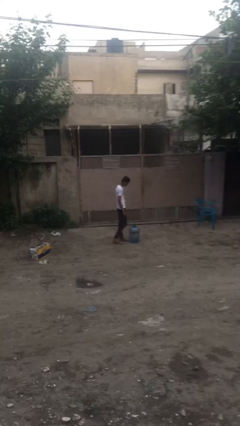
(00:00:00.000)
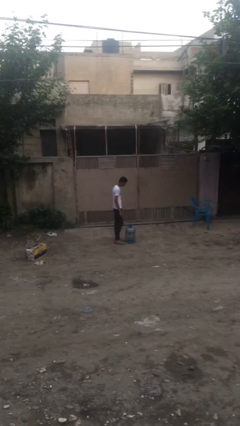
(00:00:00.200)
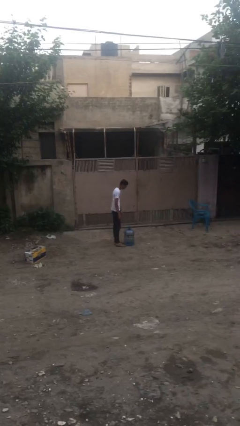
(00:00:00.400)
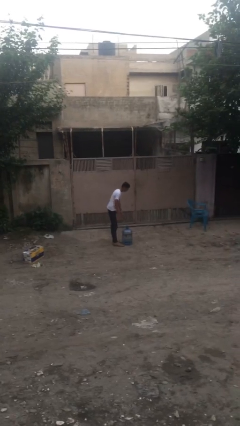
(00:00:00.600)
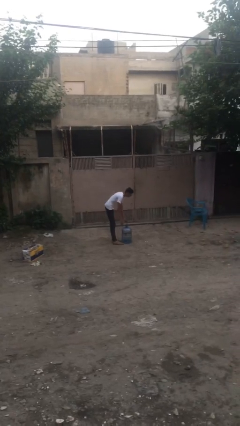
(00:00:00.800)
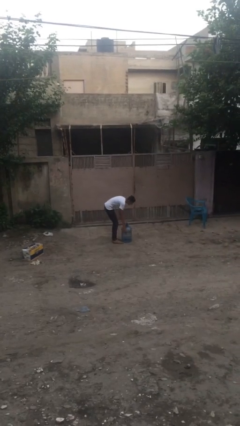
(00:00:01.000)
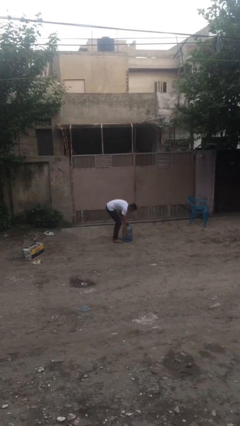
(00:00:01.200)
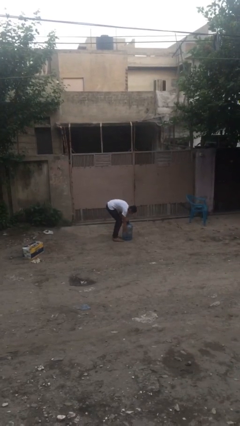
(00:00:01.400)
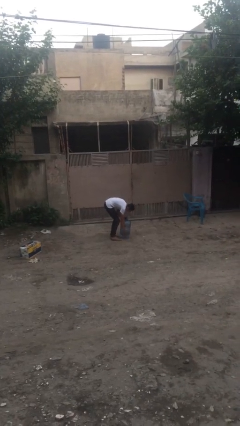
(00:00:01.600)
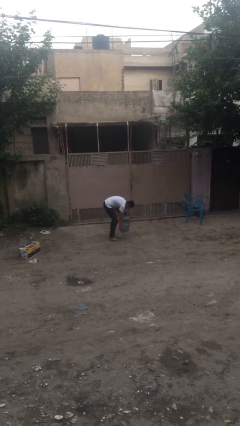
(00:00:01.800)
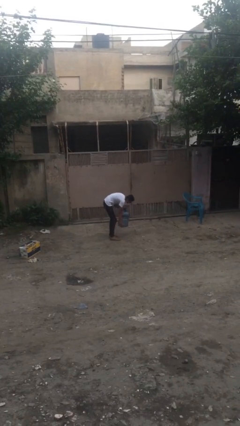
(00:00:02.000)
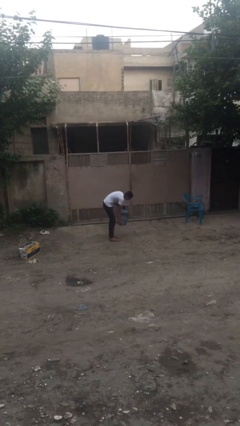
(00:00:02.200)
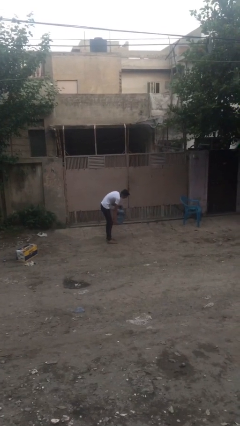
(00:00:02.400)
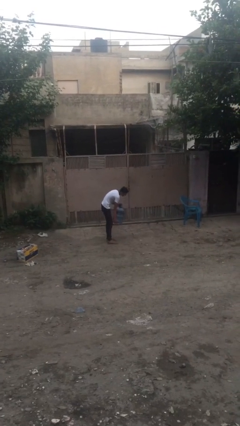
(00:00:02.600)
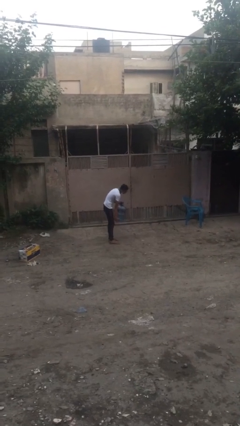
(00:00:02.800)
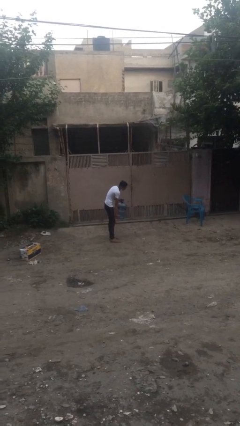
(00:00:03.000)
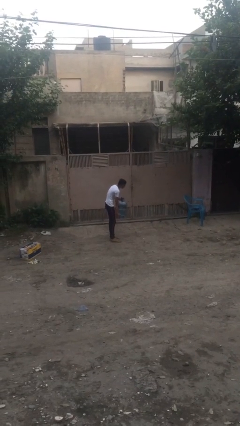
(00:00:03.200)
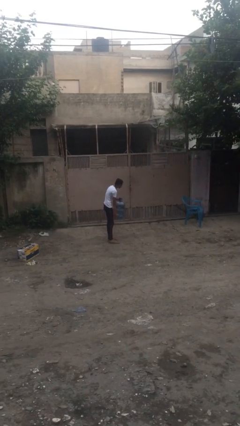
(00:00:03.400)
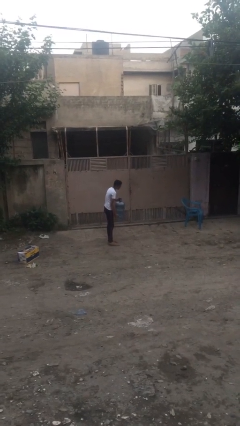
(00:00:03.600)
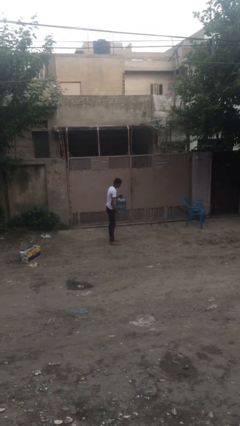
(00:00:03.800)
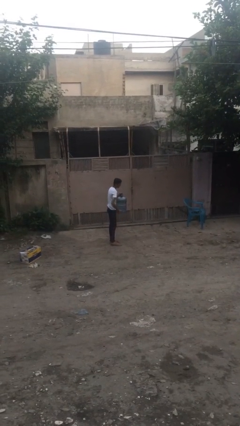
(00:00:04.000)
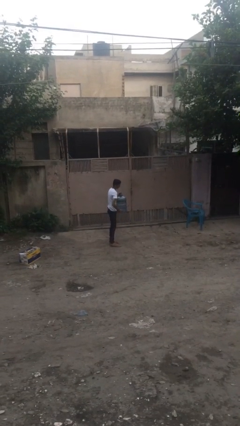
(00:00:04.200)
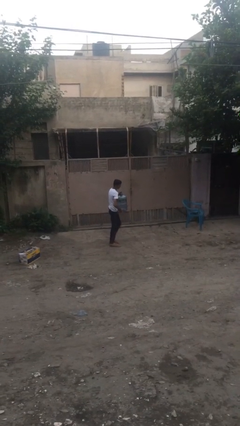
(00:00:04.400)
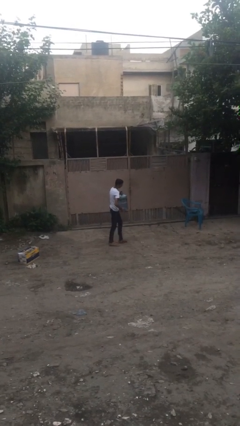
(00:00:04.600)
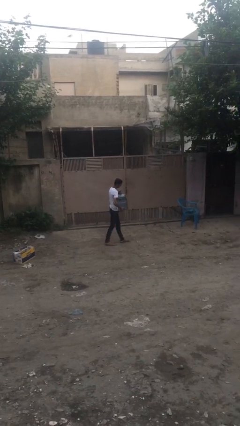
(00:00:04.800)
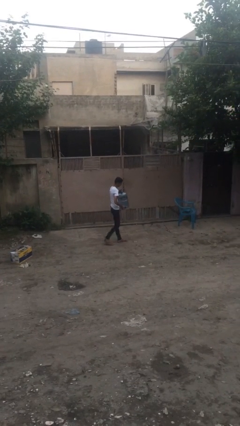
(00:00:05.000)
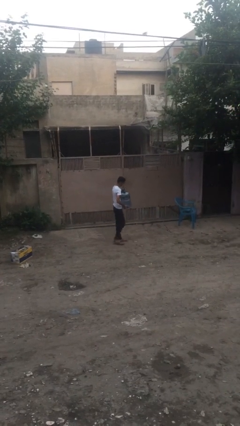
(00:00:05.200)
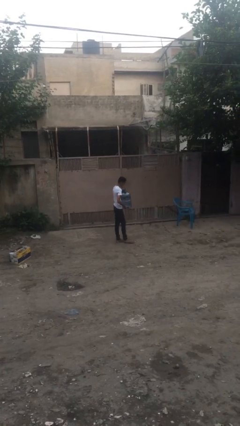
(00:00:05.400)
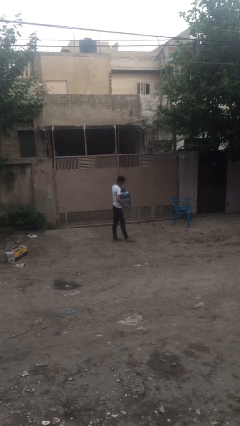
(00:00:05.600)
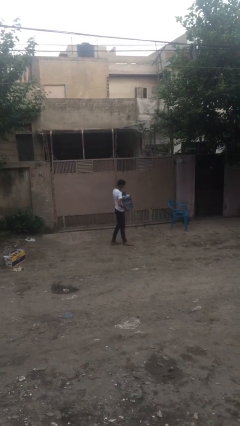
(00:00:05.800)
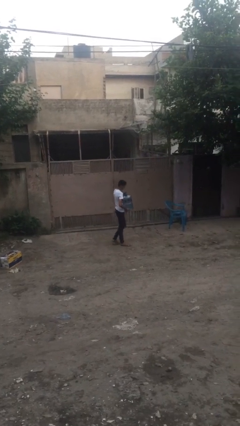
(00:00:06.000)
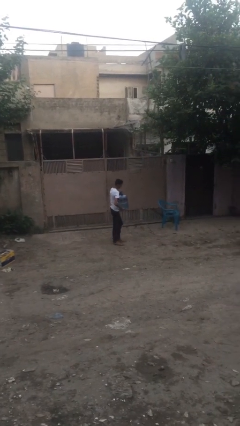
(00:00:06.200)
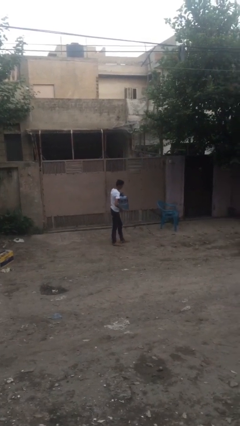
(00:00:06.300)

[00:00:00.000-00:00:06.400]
person carries heavy object

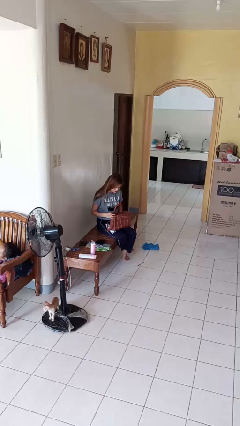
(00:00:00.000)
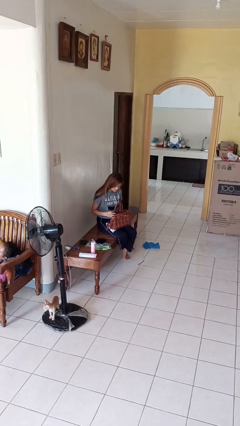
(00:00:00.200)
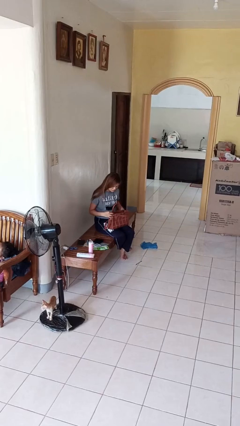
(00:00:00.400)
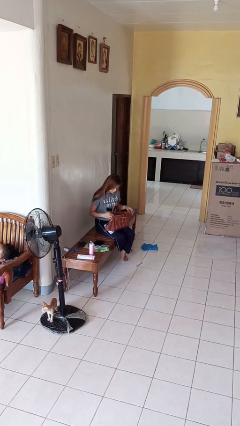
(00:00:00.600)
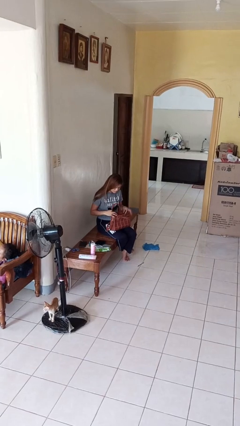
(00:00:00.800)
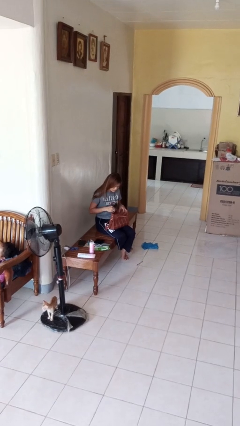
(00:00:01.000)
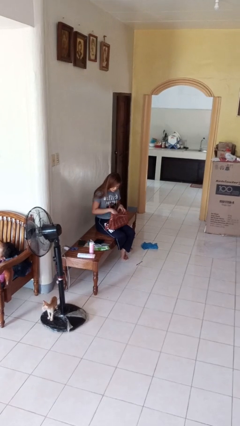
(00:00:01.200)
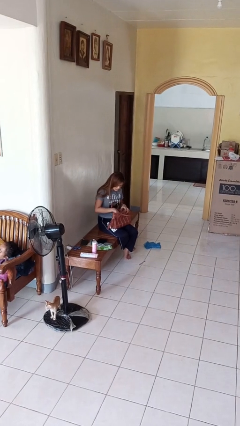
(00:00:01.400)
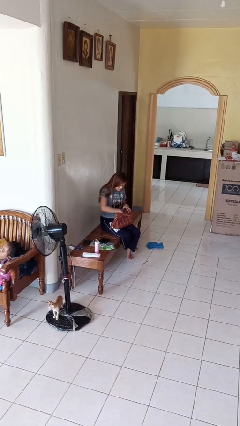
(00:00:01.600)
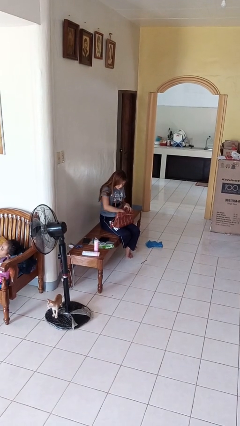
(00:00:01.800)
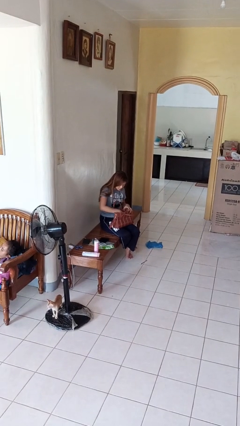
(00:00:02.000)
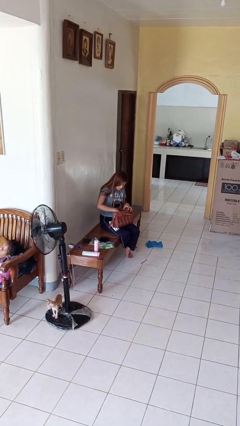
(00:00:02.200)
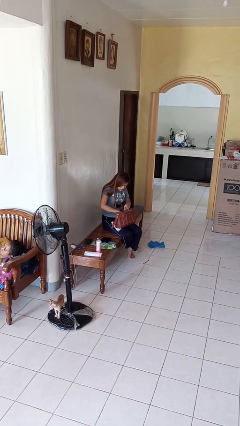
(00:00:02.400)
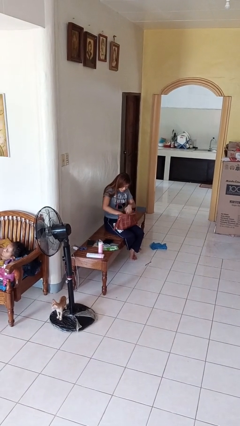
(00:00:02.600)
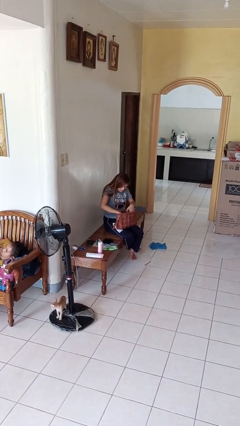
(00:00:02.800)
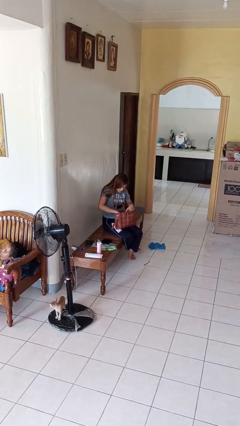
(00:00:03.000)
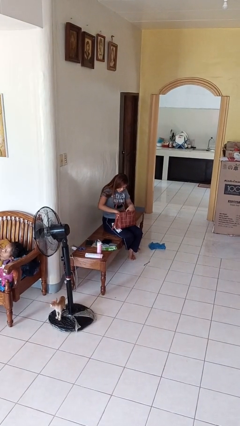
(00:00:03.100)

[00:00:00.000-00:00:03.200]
person searches in purse

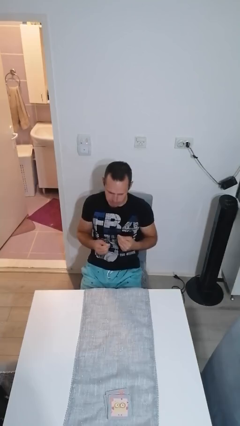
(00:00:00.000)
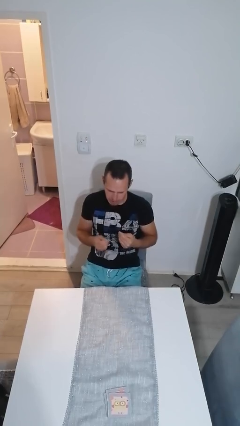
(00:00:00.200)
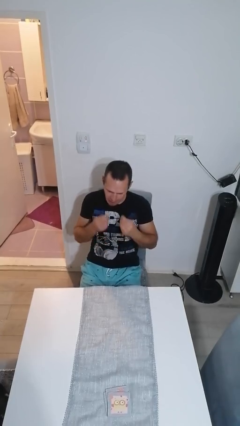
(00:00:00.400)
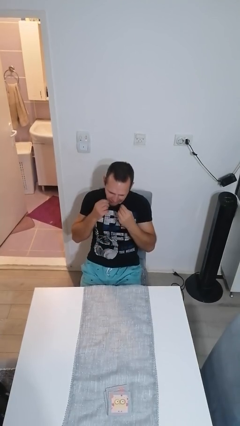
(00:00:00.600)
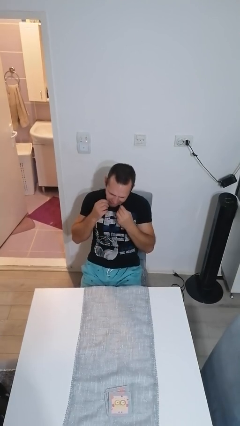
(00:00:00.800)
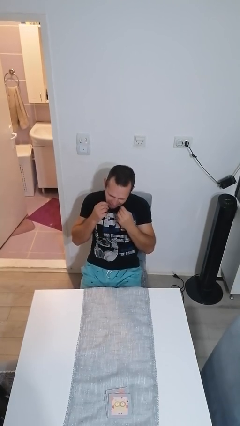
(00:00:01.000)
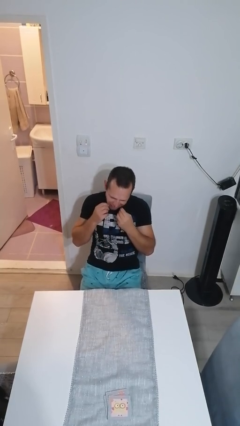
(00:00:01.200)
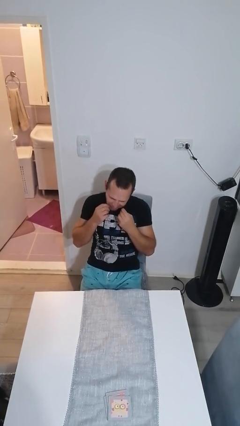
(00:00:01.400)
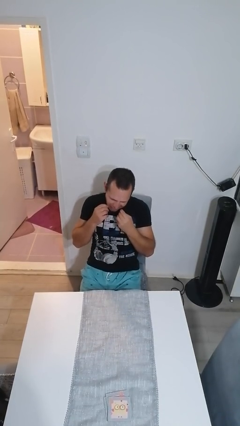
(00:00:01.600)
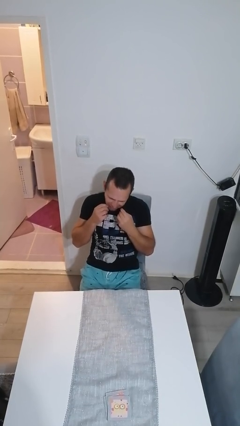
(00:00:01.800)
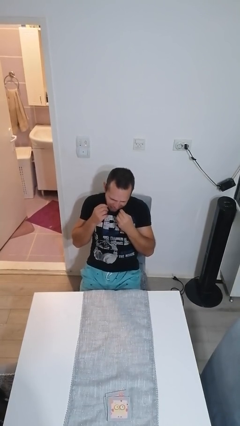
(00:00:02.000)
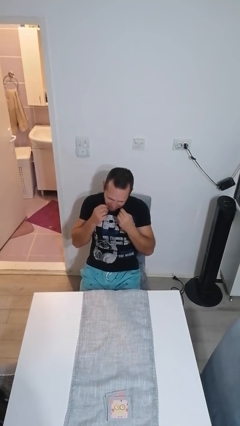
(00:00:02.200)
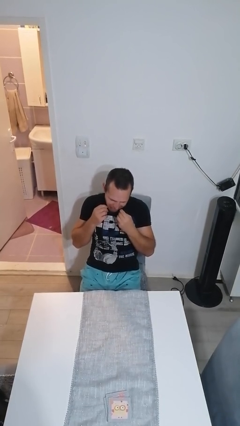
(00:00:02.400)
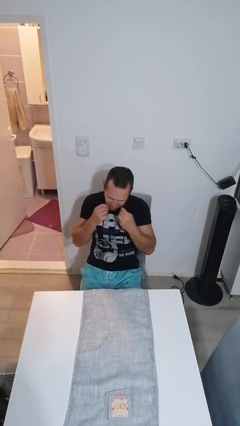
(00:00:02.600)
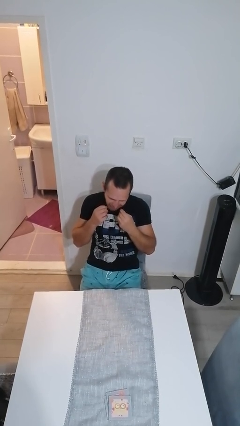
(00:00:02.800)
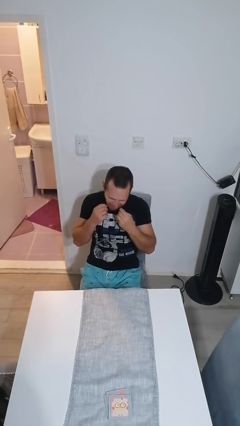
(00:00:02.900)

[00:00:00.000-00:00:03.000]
person flosses

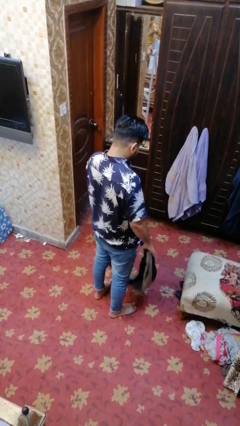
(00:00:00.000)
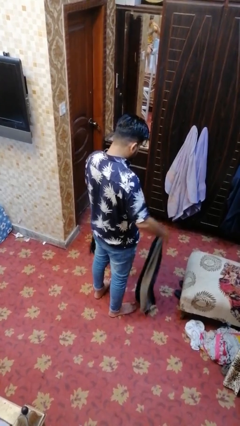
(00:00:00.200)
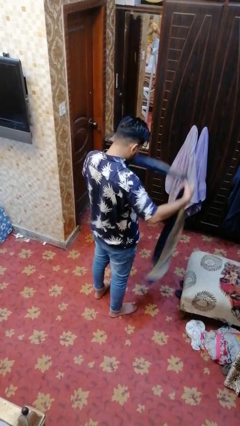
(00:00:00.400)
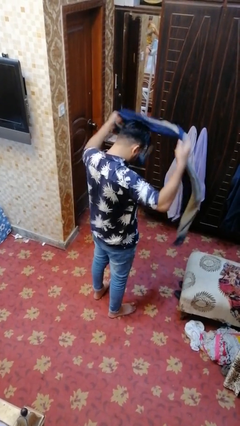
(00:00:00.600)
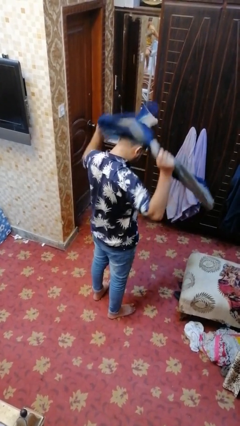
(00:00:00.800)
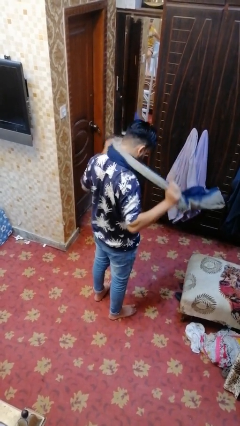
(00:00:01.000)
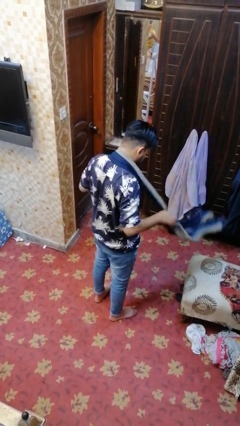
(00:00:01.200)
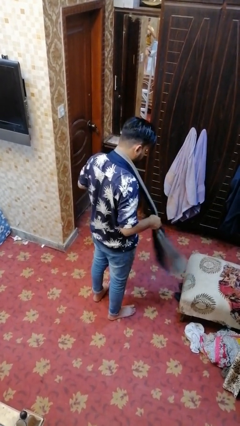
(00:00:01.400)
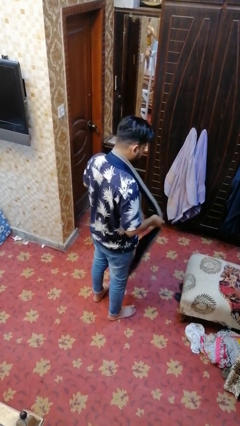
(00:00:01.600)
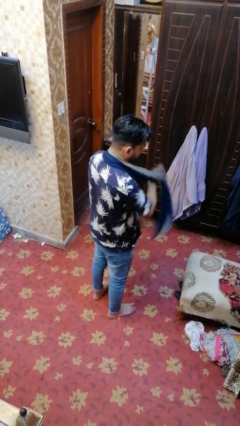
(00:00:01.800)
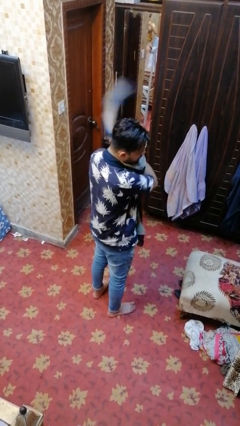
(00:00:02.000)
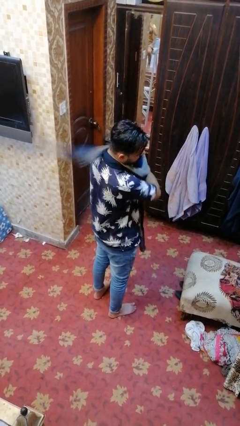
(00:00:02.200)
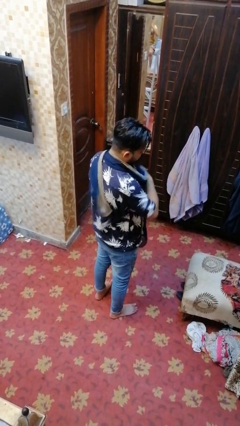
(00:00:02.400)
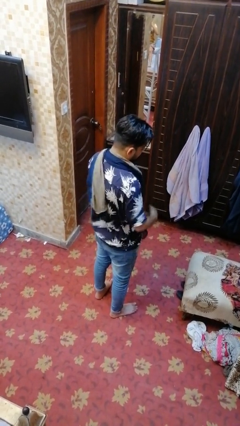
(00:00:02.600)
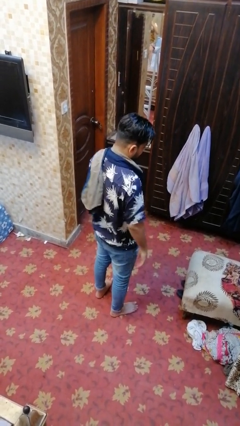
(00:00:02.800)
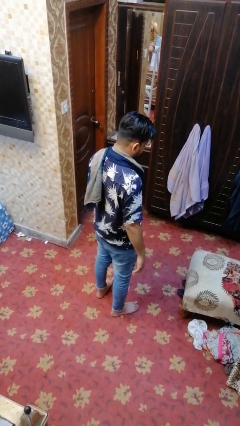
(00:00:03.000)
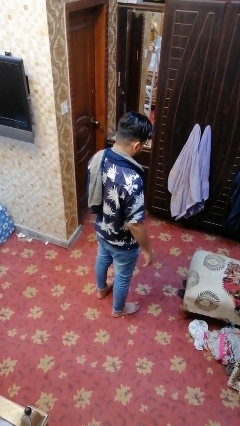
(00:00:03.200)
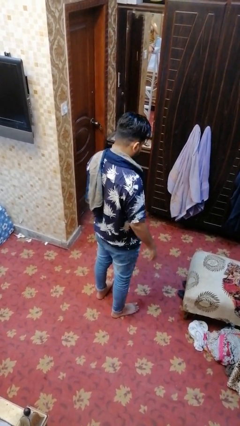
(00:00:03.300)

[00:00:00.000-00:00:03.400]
person puts on scarf

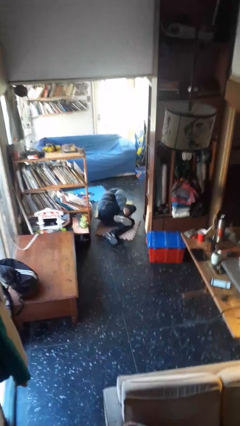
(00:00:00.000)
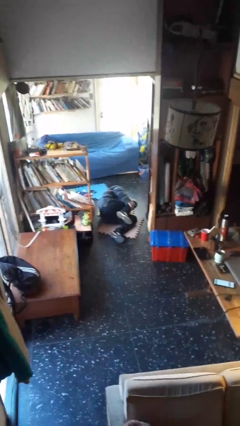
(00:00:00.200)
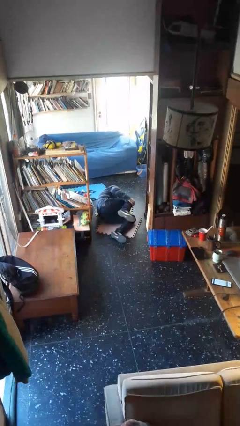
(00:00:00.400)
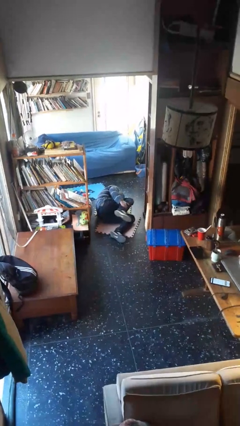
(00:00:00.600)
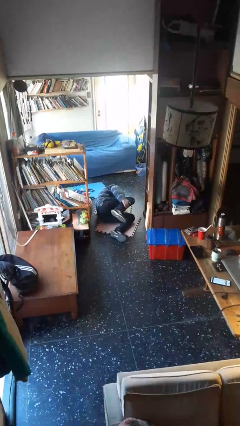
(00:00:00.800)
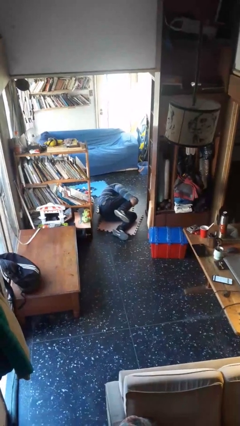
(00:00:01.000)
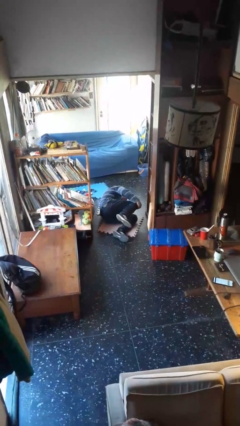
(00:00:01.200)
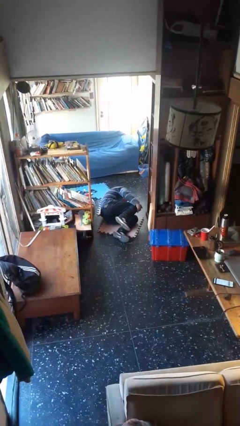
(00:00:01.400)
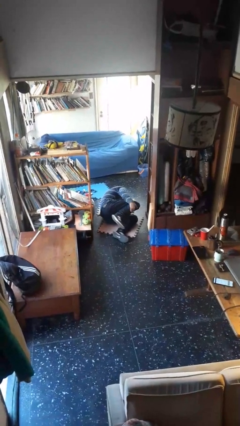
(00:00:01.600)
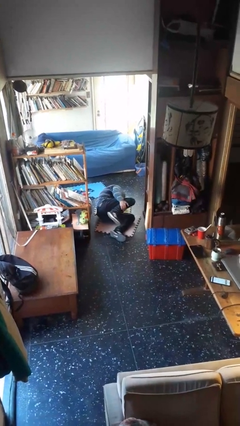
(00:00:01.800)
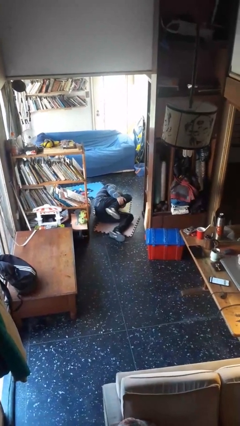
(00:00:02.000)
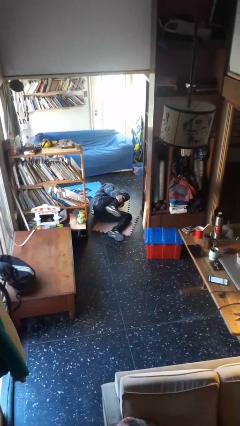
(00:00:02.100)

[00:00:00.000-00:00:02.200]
person lies down on floor
